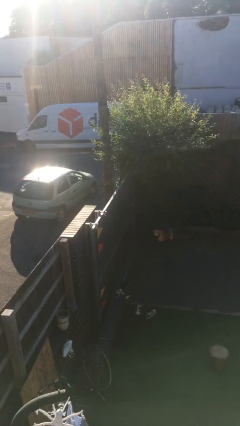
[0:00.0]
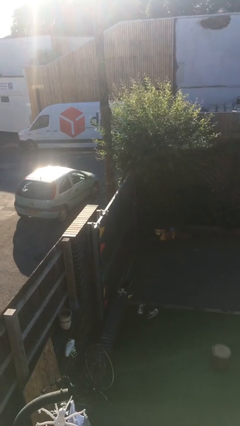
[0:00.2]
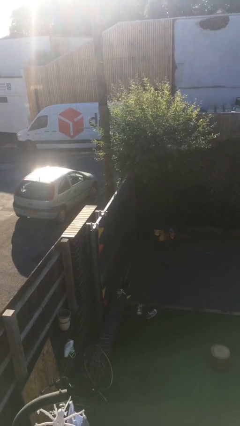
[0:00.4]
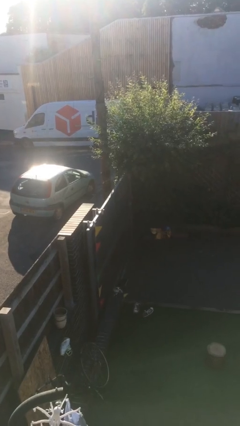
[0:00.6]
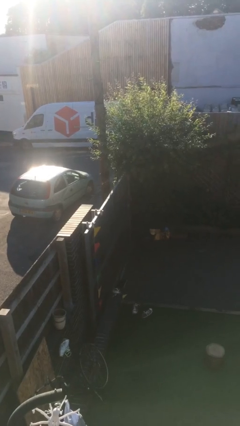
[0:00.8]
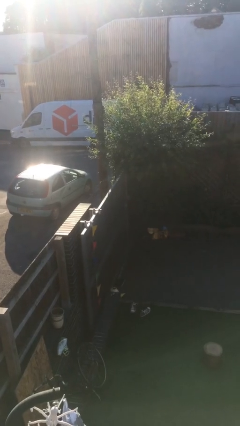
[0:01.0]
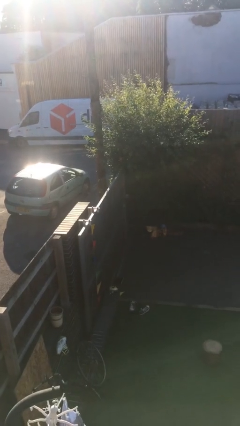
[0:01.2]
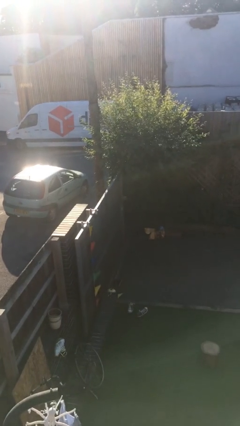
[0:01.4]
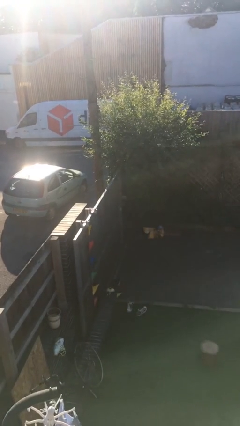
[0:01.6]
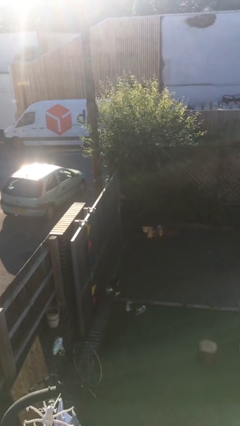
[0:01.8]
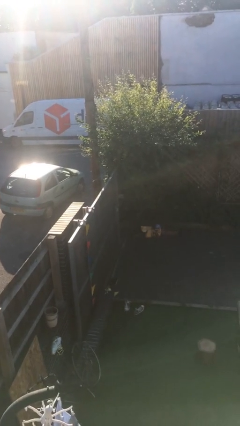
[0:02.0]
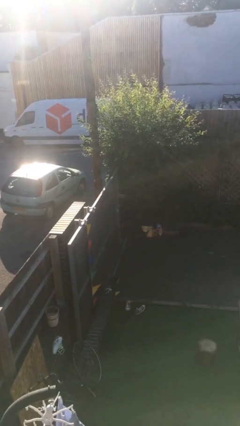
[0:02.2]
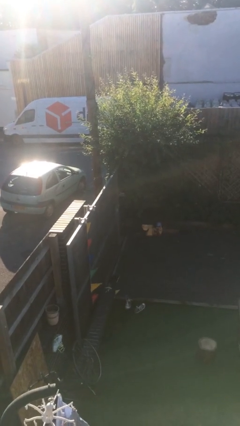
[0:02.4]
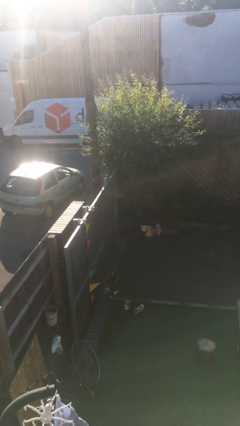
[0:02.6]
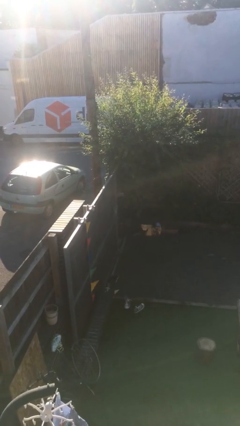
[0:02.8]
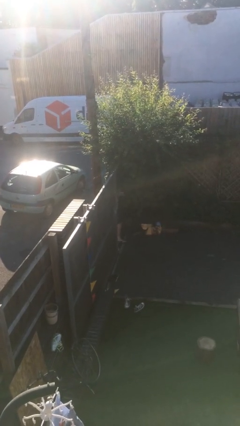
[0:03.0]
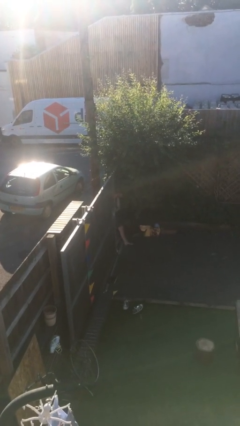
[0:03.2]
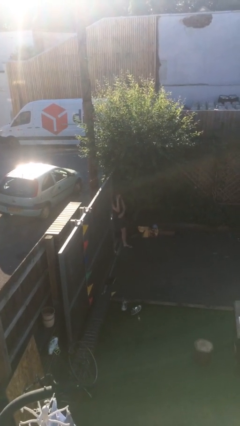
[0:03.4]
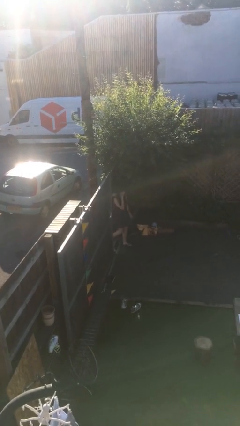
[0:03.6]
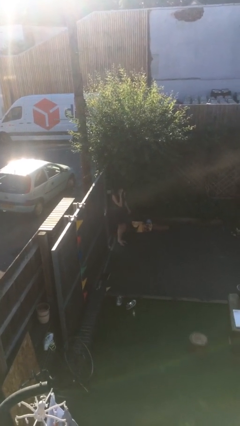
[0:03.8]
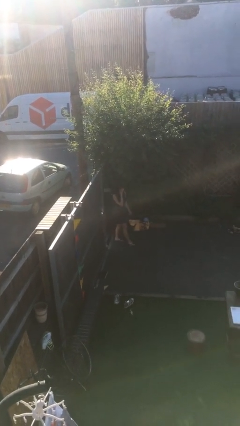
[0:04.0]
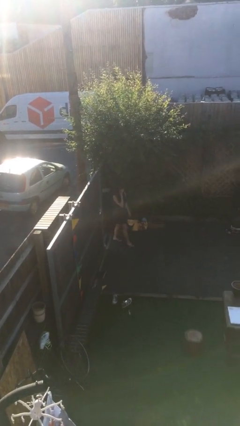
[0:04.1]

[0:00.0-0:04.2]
person opens facility door

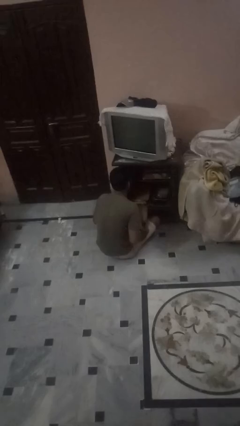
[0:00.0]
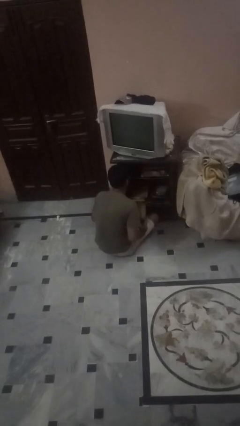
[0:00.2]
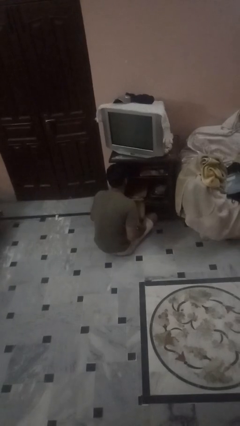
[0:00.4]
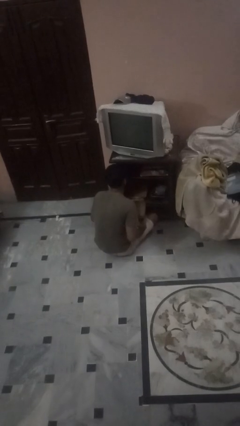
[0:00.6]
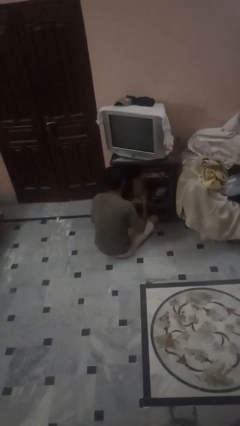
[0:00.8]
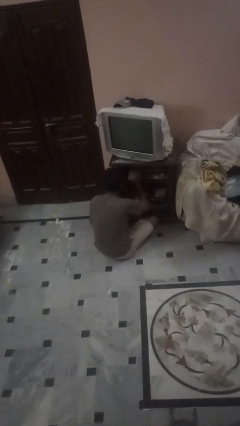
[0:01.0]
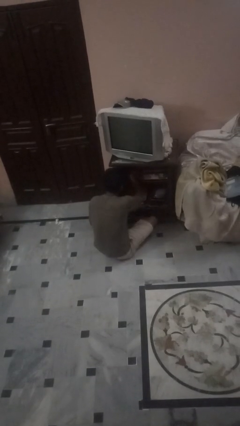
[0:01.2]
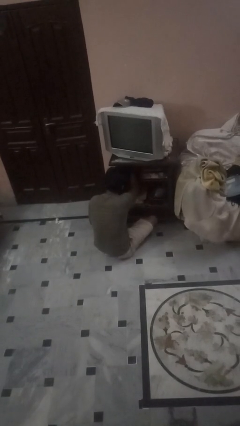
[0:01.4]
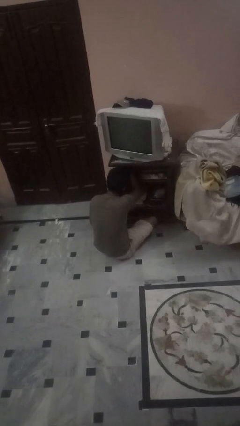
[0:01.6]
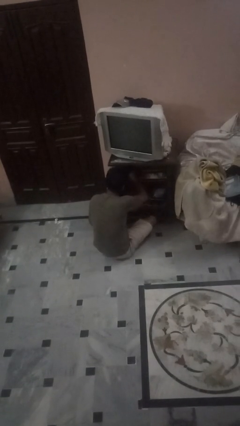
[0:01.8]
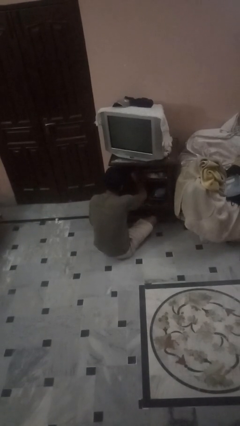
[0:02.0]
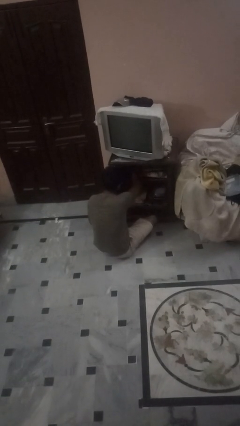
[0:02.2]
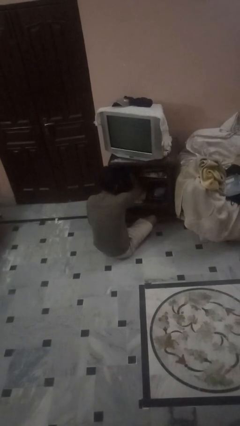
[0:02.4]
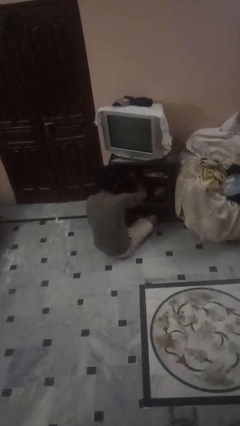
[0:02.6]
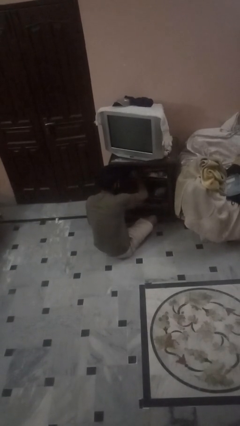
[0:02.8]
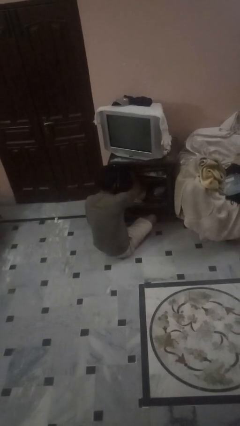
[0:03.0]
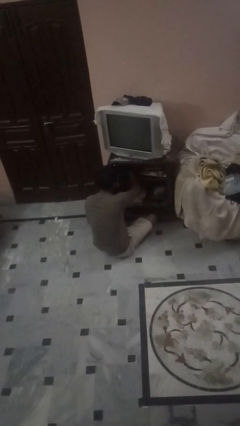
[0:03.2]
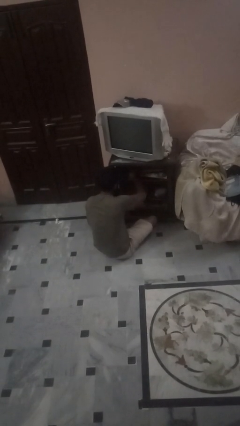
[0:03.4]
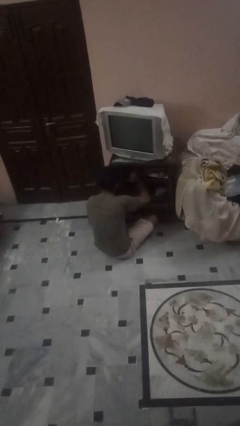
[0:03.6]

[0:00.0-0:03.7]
person dusts furniture

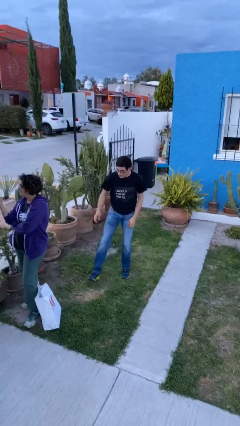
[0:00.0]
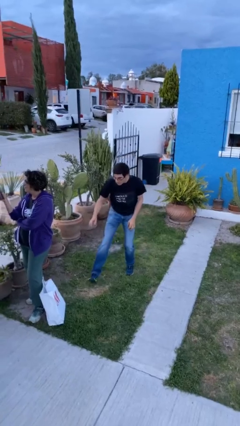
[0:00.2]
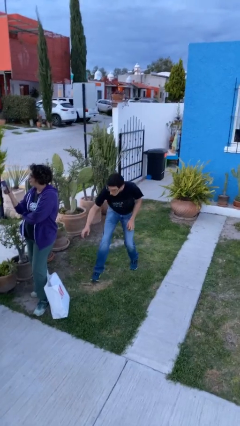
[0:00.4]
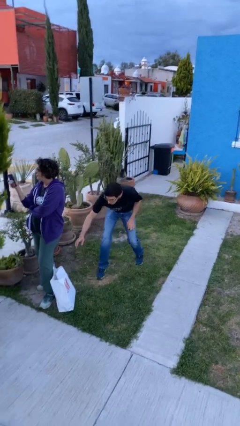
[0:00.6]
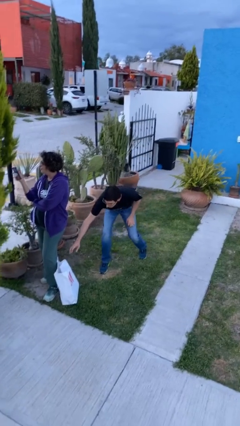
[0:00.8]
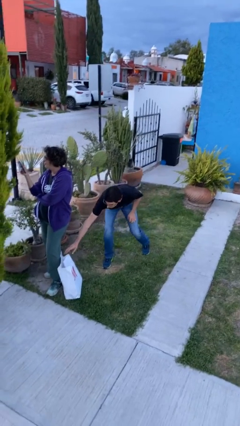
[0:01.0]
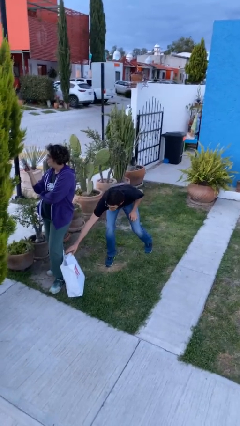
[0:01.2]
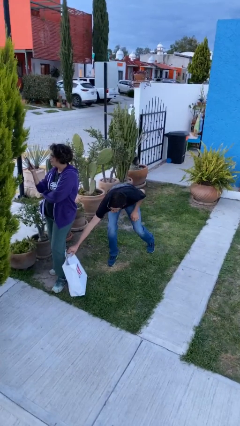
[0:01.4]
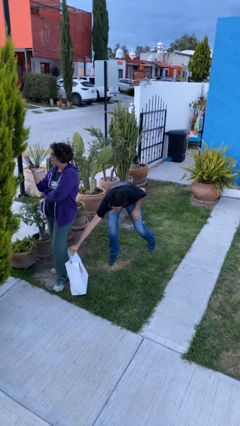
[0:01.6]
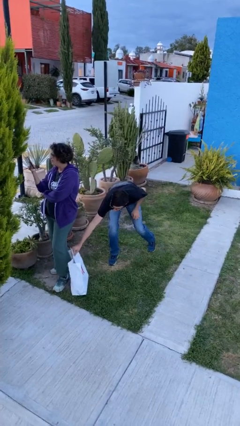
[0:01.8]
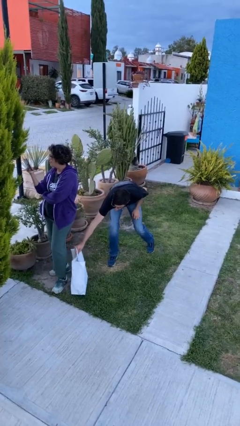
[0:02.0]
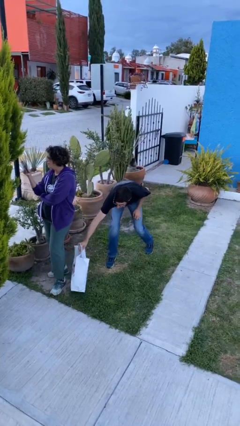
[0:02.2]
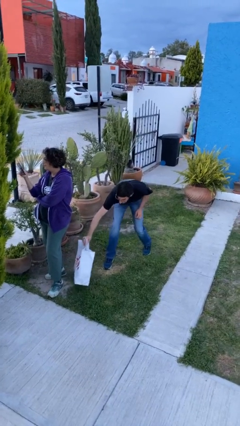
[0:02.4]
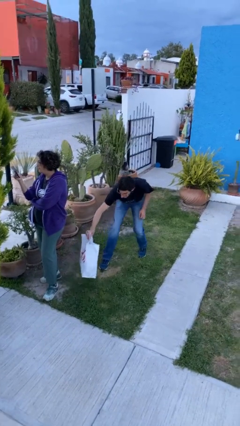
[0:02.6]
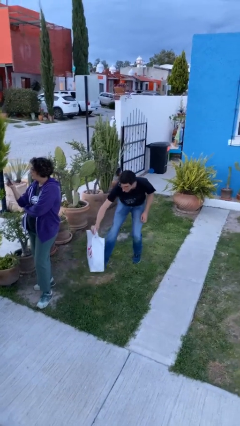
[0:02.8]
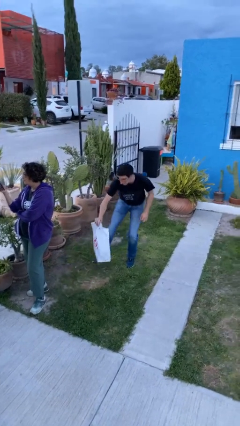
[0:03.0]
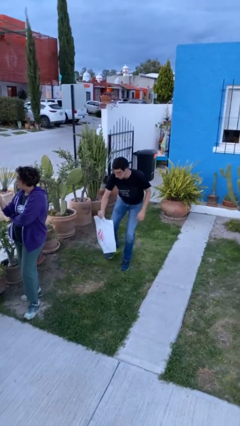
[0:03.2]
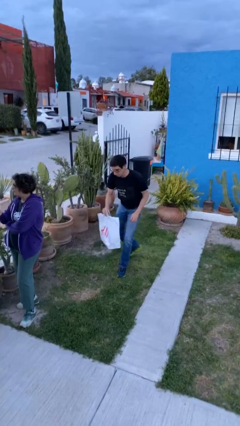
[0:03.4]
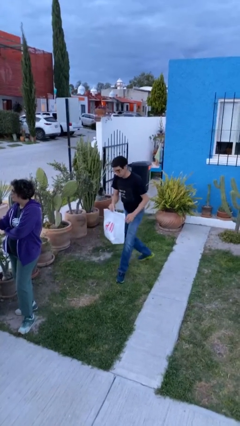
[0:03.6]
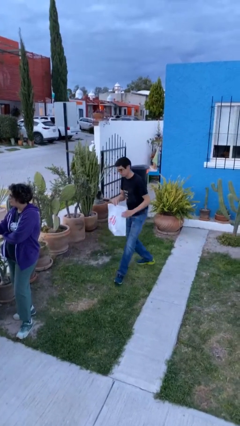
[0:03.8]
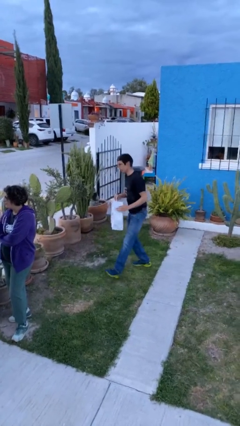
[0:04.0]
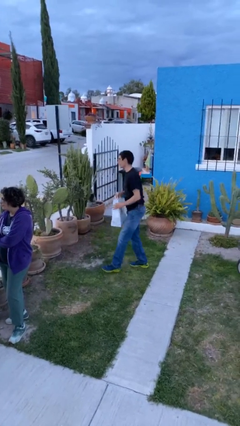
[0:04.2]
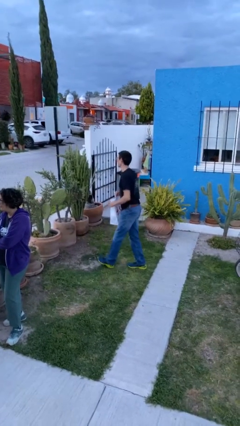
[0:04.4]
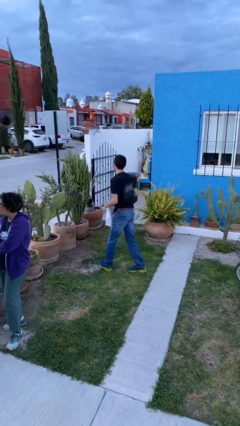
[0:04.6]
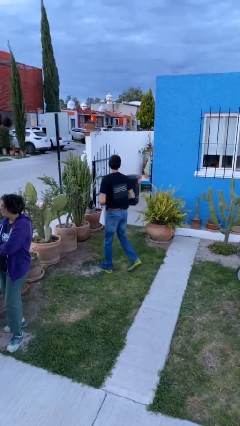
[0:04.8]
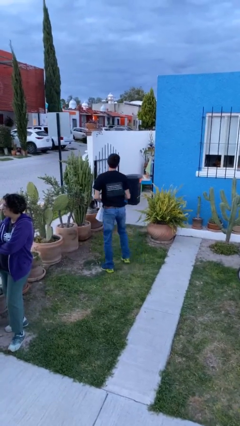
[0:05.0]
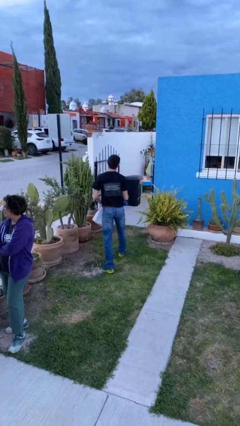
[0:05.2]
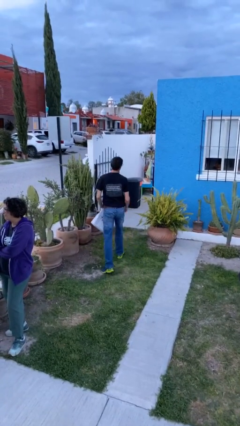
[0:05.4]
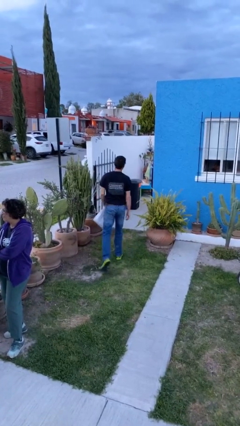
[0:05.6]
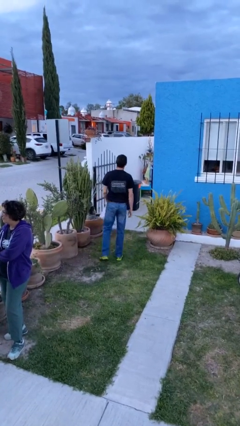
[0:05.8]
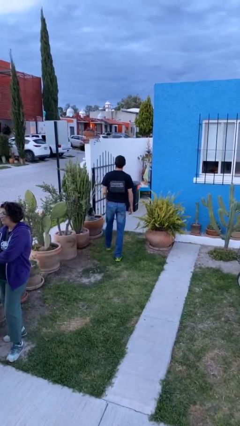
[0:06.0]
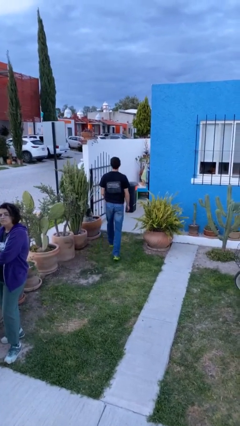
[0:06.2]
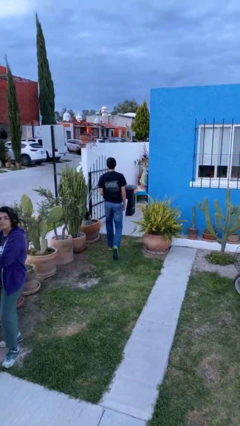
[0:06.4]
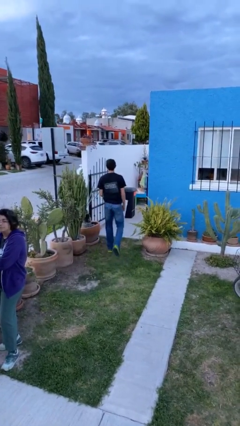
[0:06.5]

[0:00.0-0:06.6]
person steals object from person

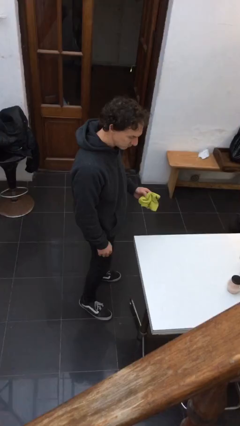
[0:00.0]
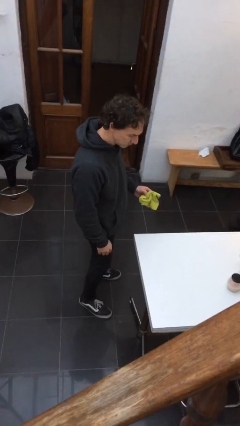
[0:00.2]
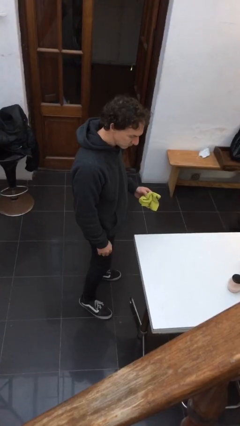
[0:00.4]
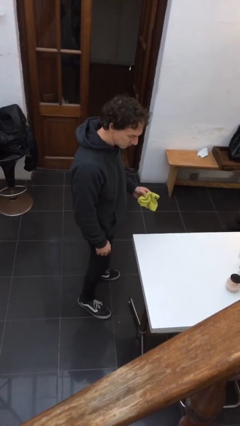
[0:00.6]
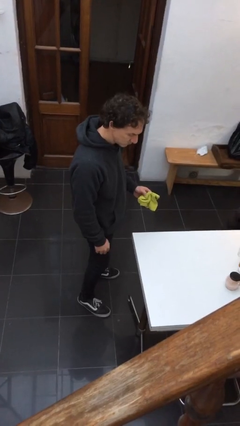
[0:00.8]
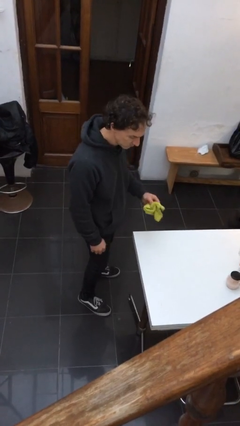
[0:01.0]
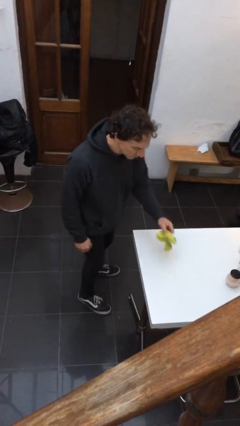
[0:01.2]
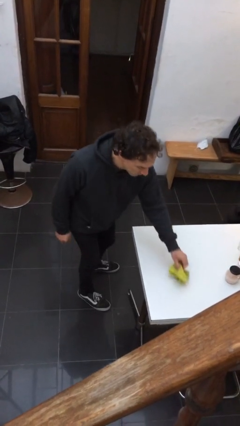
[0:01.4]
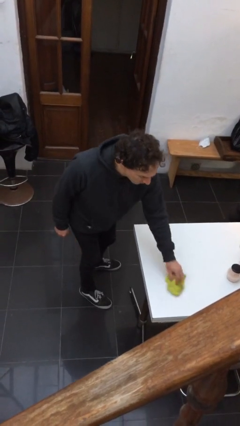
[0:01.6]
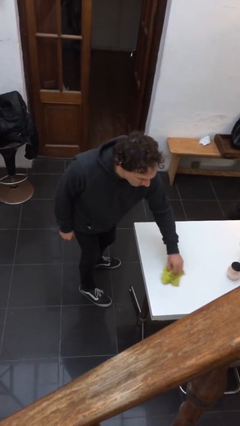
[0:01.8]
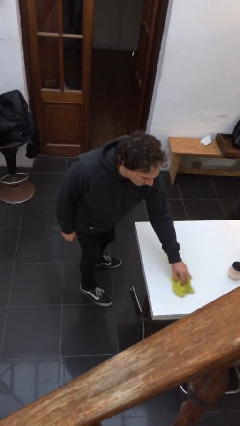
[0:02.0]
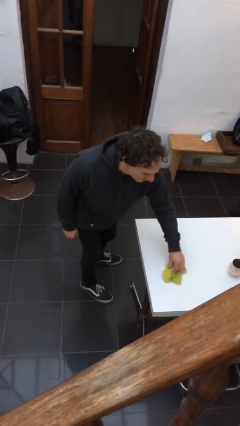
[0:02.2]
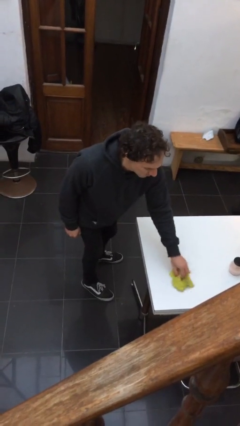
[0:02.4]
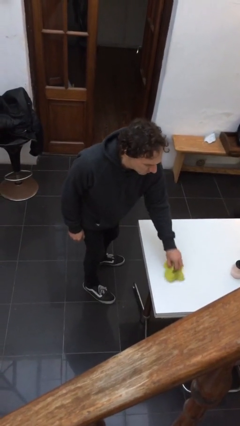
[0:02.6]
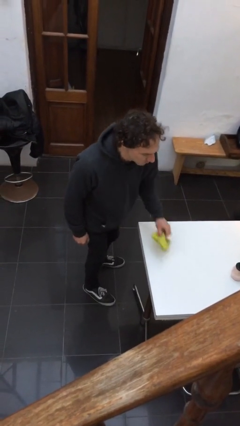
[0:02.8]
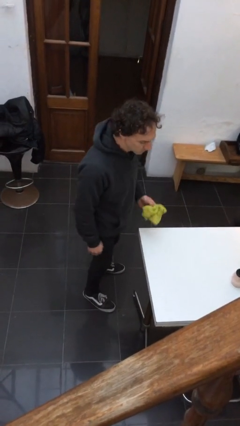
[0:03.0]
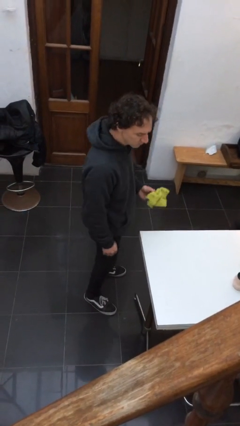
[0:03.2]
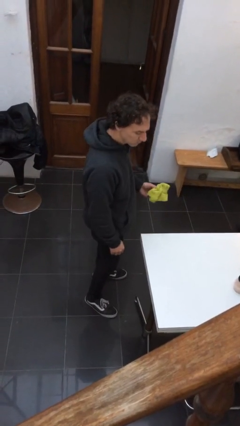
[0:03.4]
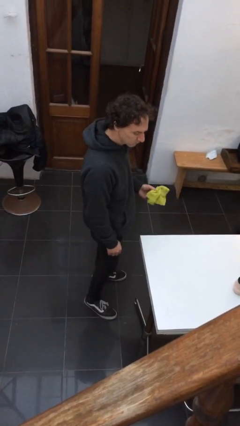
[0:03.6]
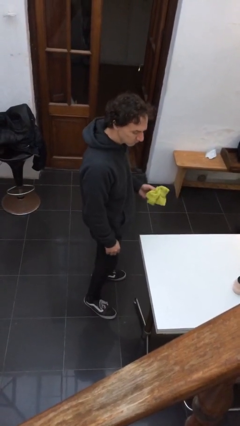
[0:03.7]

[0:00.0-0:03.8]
person cleans table with rag
